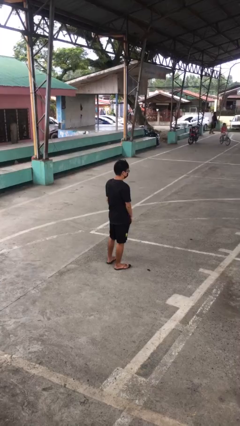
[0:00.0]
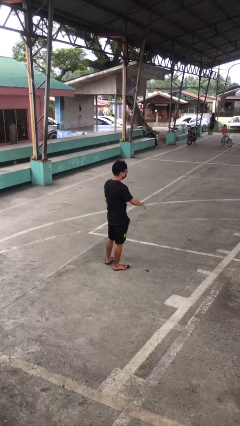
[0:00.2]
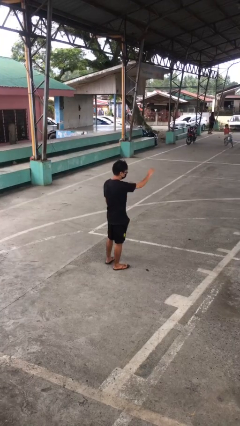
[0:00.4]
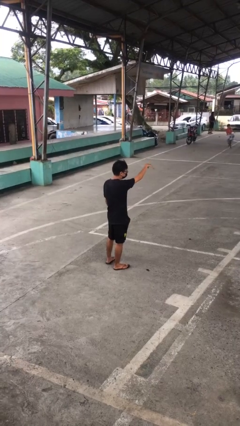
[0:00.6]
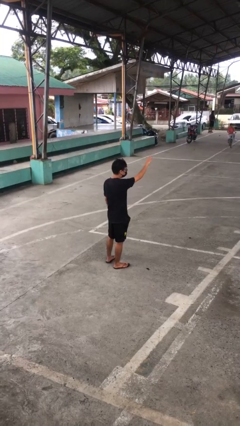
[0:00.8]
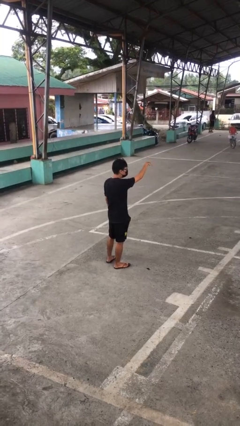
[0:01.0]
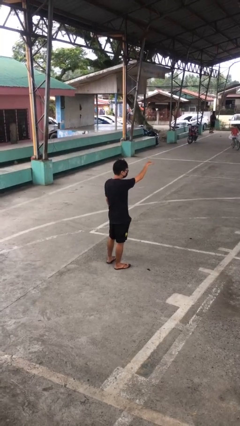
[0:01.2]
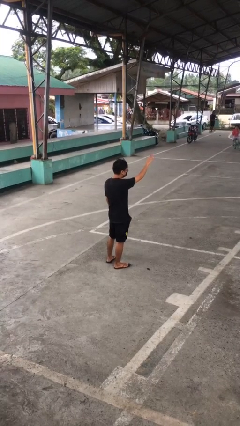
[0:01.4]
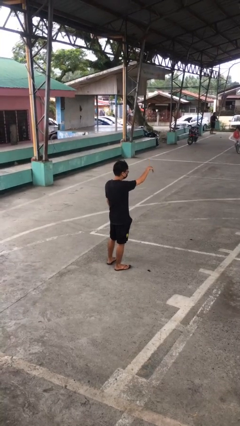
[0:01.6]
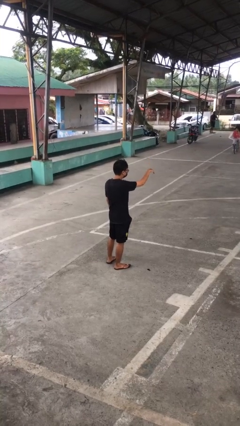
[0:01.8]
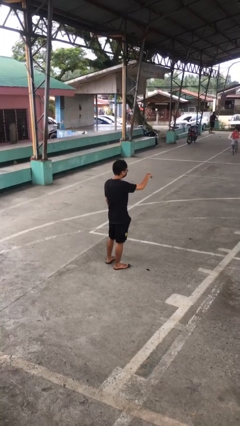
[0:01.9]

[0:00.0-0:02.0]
person gestures come here

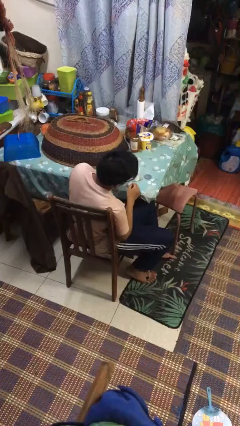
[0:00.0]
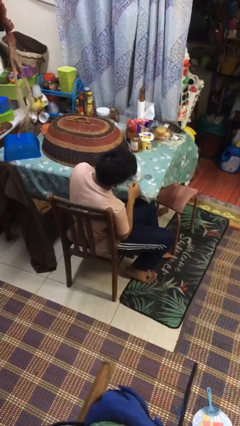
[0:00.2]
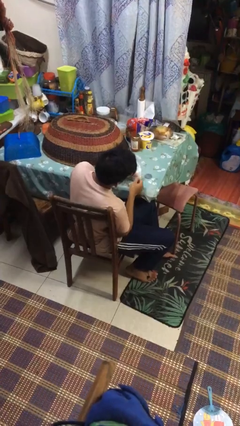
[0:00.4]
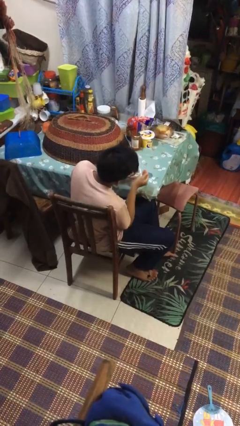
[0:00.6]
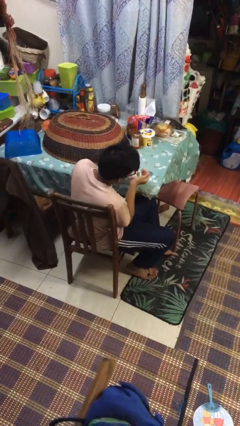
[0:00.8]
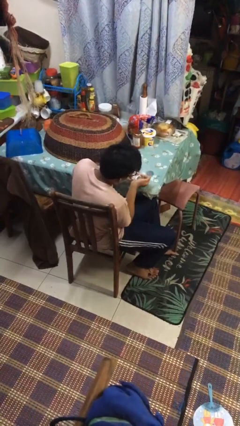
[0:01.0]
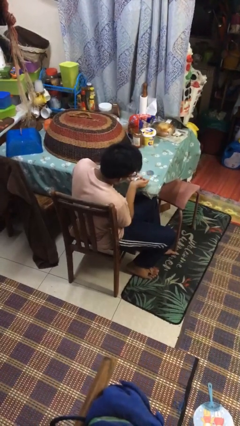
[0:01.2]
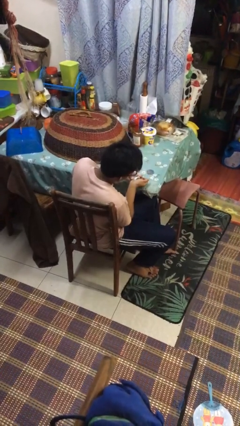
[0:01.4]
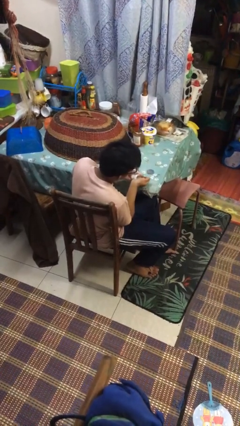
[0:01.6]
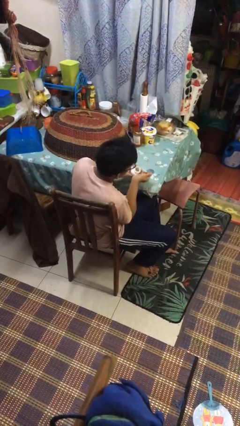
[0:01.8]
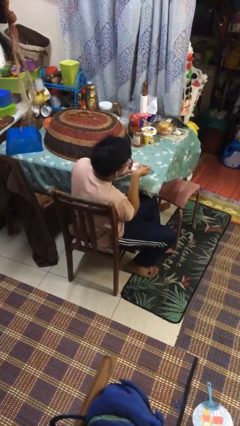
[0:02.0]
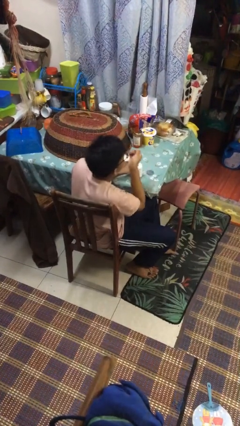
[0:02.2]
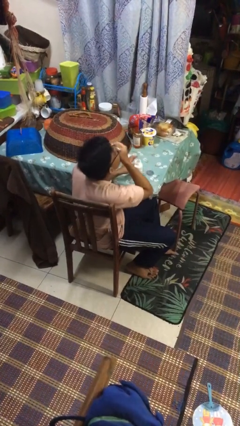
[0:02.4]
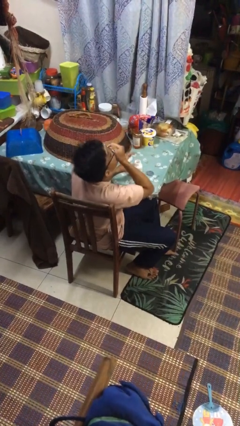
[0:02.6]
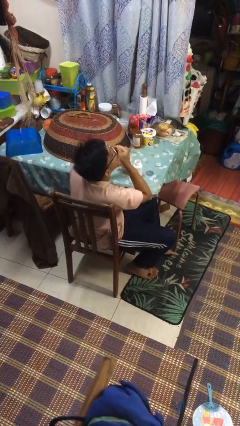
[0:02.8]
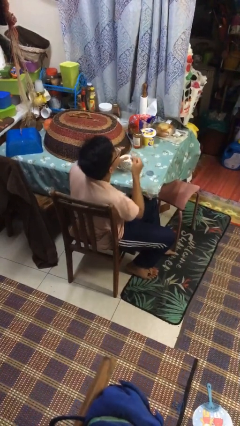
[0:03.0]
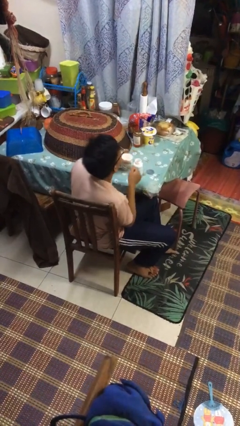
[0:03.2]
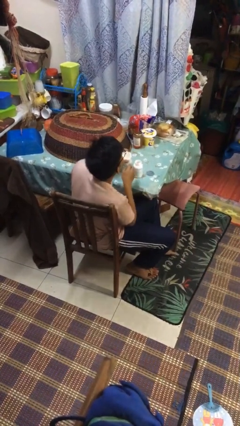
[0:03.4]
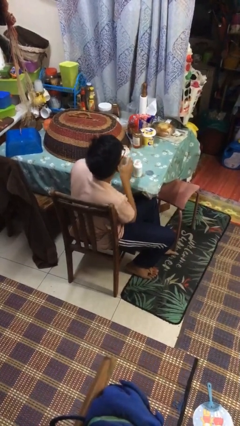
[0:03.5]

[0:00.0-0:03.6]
person takes medicine pills

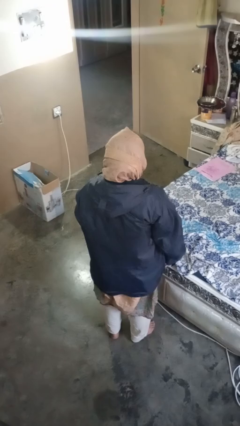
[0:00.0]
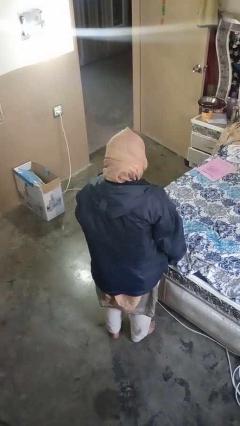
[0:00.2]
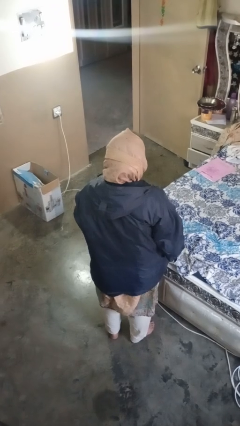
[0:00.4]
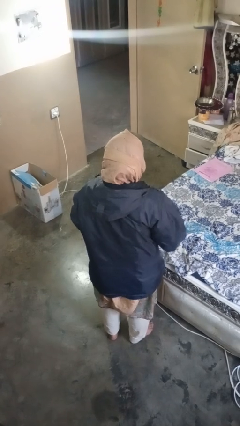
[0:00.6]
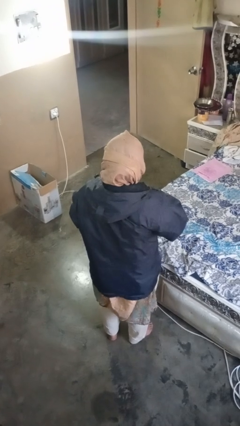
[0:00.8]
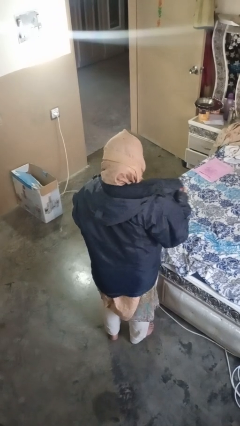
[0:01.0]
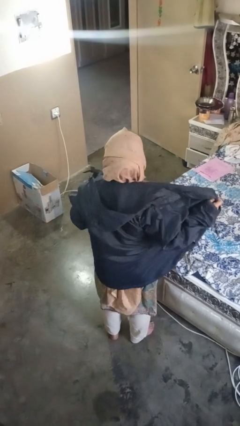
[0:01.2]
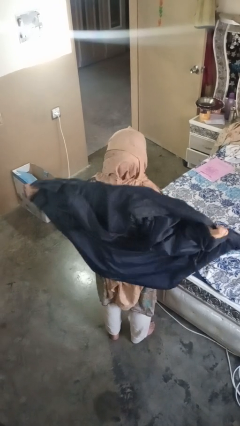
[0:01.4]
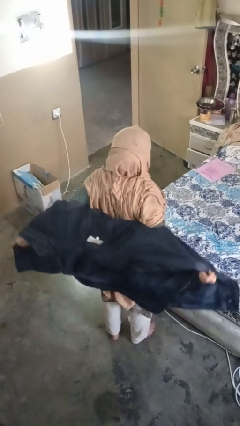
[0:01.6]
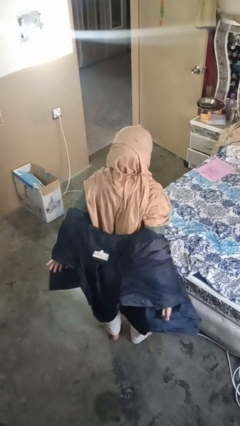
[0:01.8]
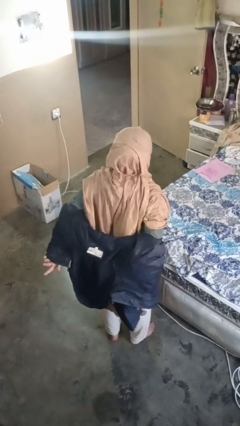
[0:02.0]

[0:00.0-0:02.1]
person unzips jacket

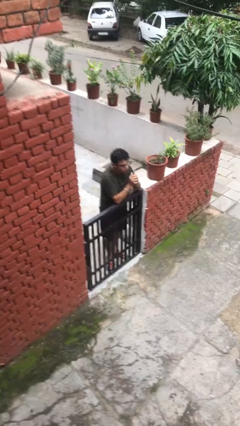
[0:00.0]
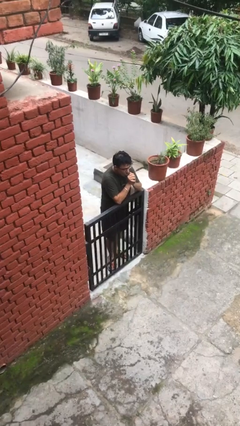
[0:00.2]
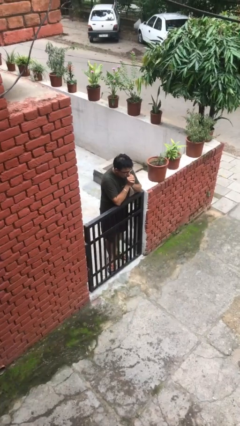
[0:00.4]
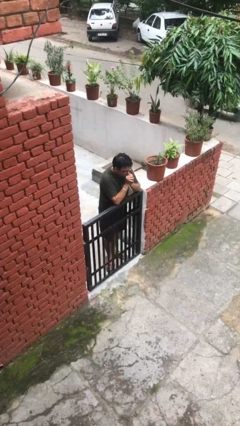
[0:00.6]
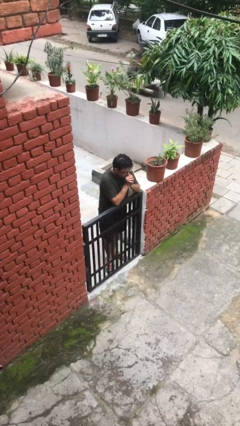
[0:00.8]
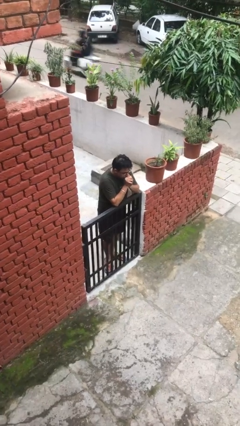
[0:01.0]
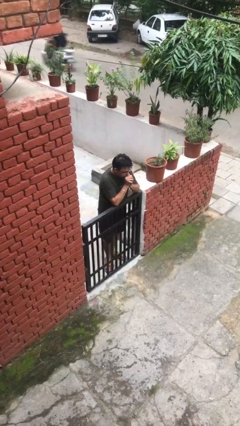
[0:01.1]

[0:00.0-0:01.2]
person blows into hands

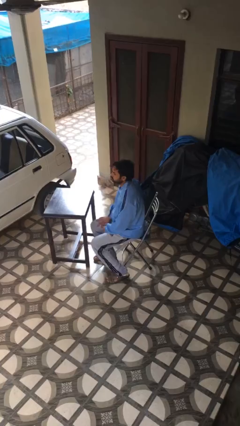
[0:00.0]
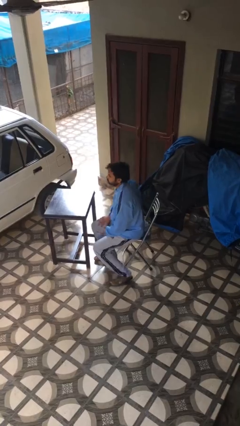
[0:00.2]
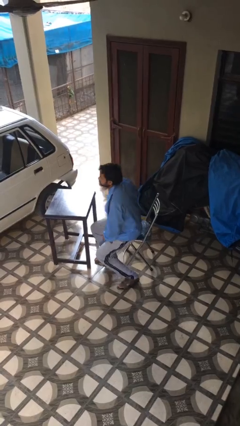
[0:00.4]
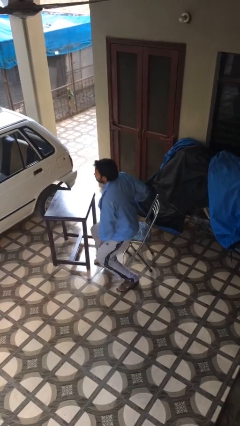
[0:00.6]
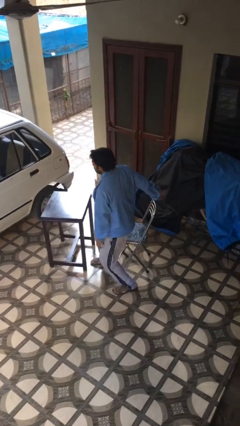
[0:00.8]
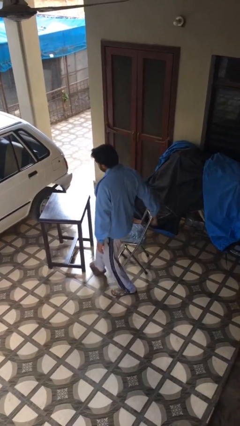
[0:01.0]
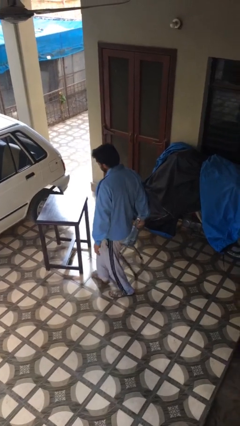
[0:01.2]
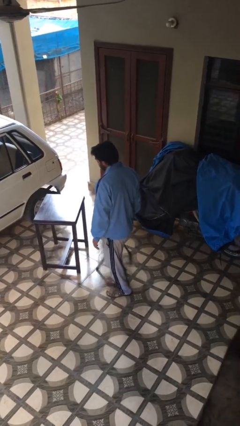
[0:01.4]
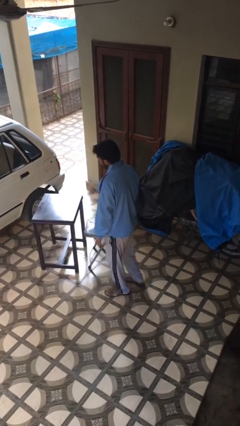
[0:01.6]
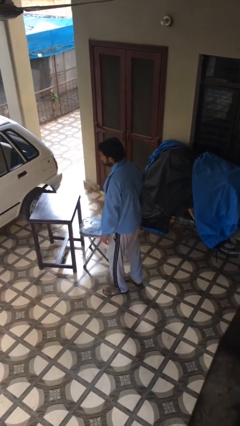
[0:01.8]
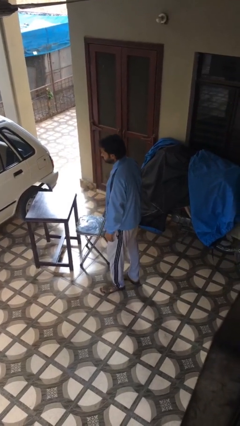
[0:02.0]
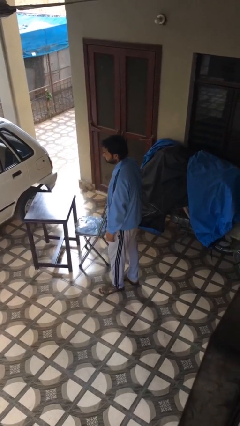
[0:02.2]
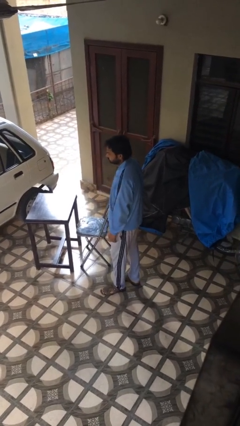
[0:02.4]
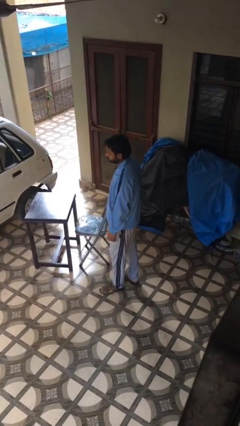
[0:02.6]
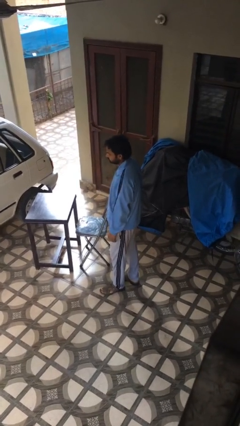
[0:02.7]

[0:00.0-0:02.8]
person stands up

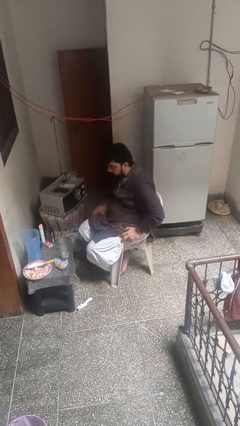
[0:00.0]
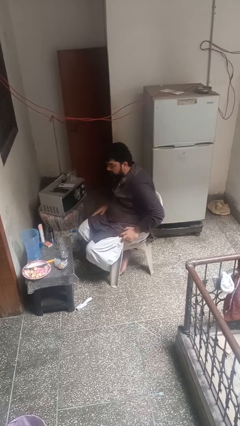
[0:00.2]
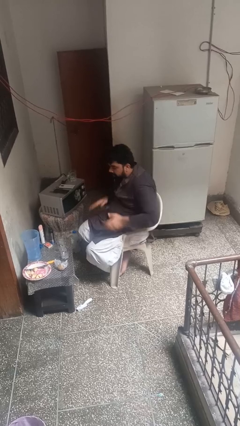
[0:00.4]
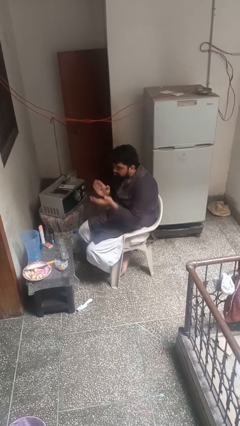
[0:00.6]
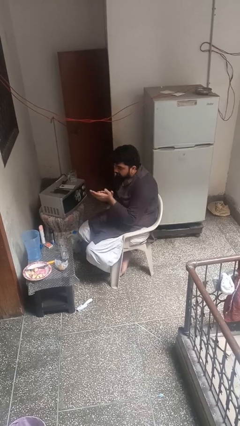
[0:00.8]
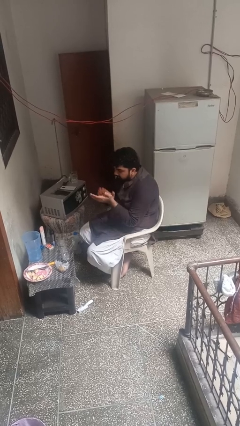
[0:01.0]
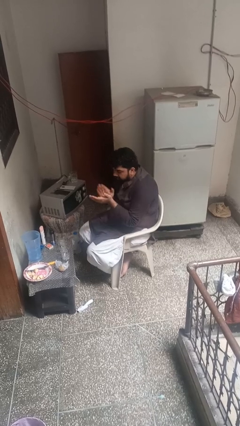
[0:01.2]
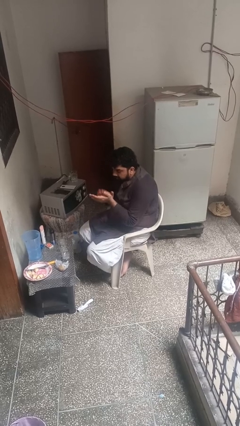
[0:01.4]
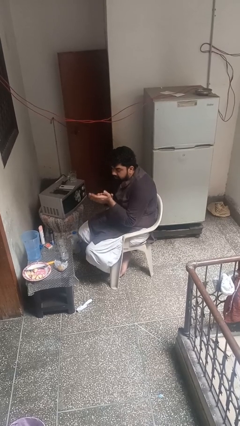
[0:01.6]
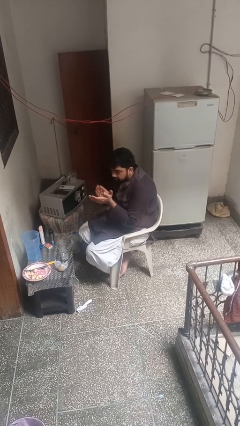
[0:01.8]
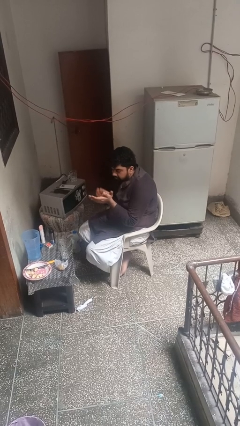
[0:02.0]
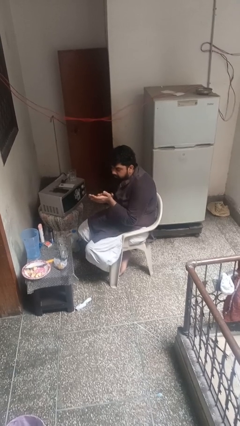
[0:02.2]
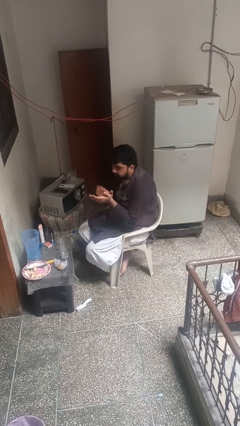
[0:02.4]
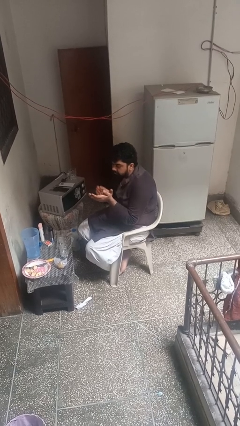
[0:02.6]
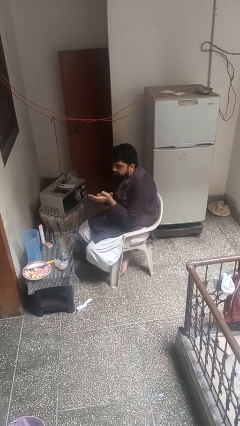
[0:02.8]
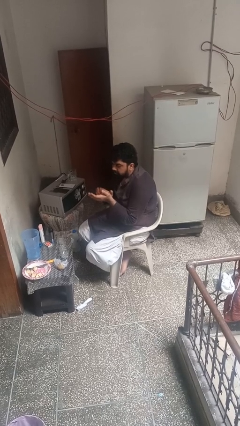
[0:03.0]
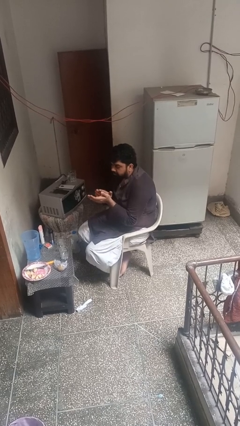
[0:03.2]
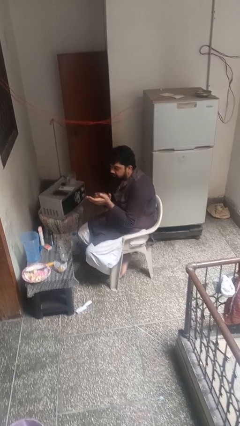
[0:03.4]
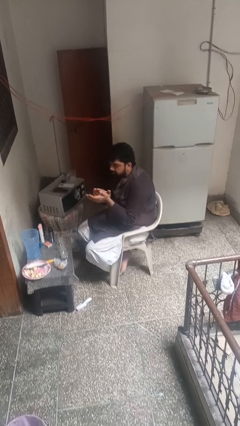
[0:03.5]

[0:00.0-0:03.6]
person claps hands

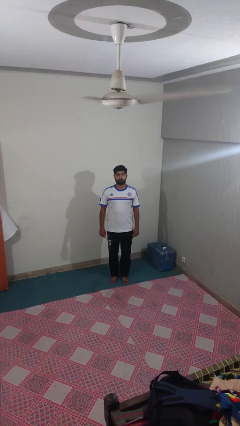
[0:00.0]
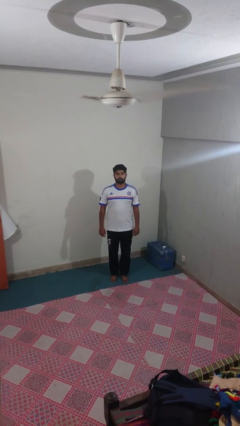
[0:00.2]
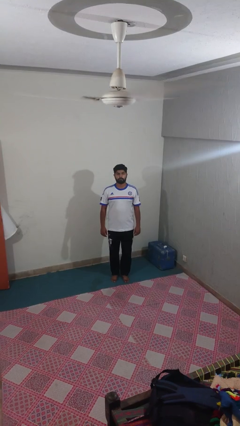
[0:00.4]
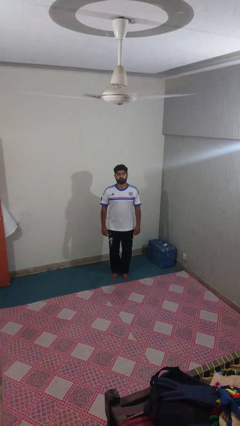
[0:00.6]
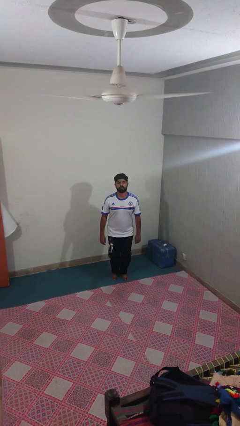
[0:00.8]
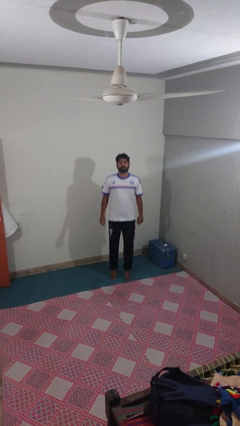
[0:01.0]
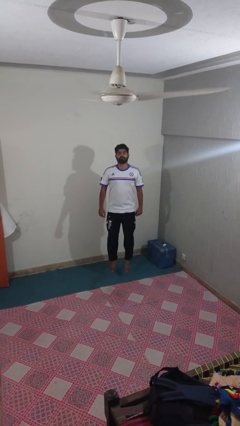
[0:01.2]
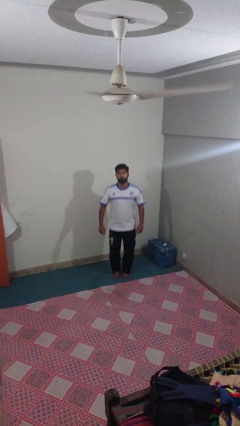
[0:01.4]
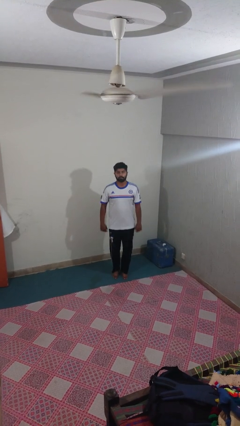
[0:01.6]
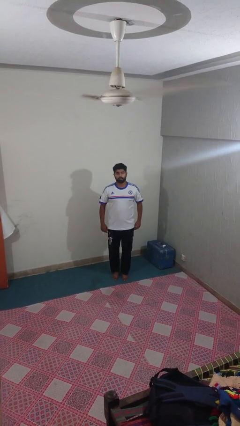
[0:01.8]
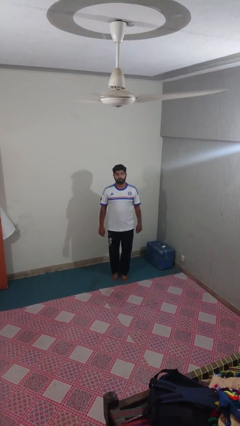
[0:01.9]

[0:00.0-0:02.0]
person jumps
